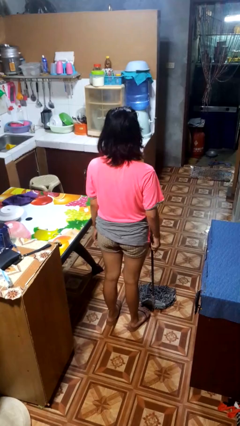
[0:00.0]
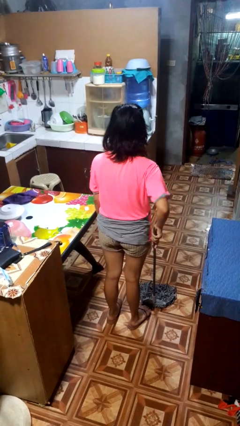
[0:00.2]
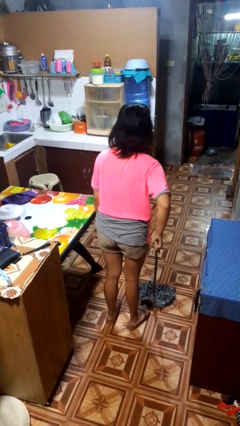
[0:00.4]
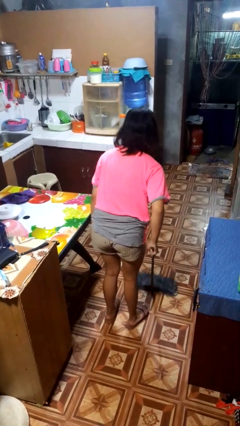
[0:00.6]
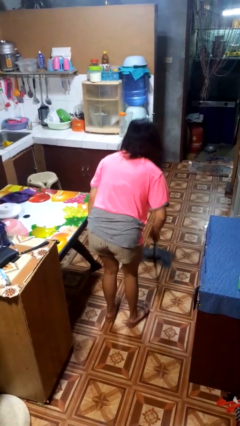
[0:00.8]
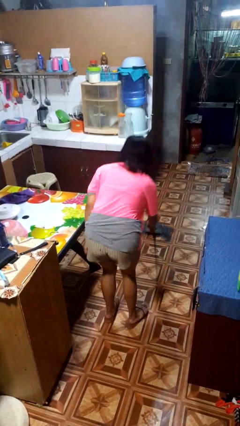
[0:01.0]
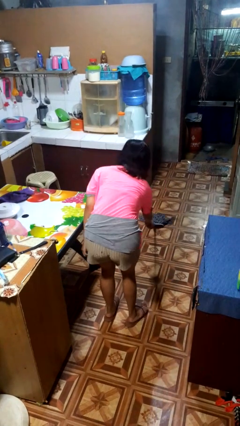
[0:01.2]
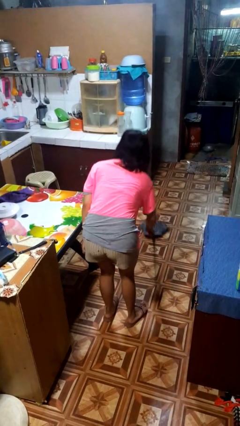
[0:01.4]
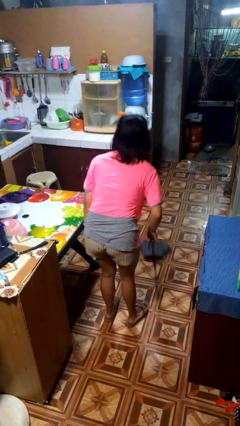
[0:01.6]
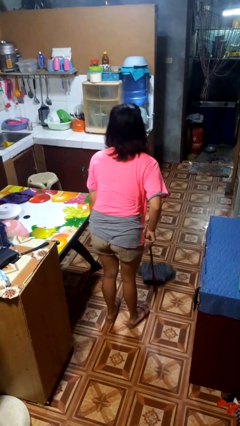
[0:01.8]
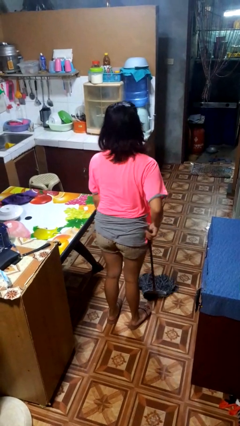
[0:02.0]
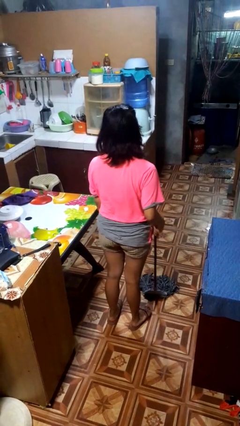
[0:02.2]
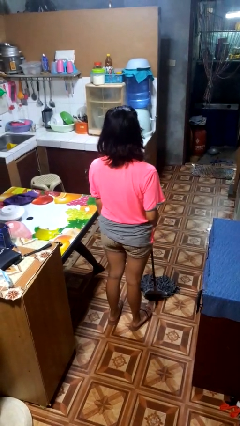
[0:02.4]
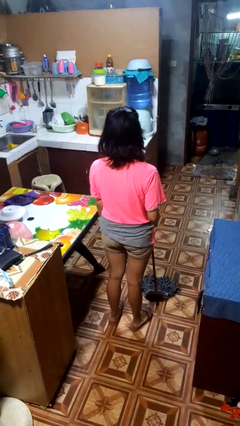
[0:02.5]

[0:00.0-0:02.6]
person mops

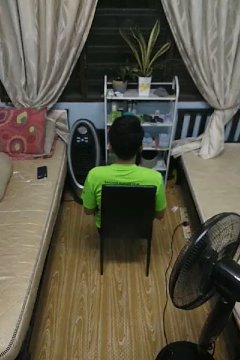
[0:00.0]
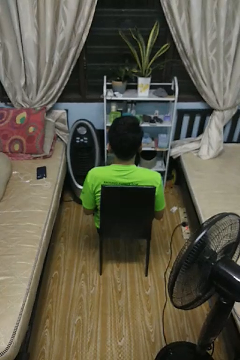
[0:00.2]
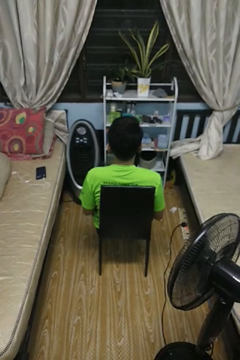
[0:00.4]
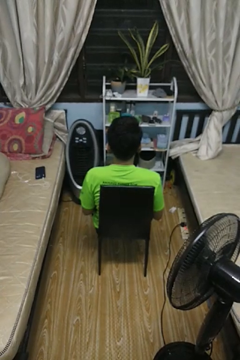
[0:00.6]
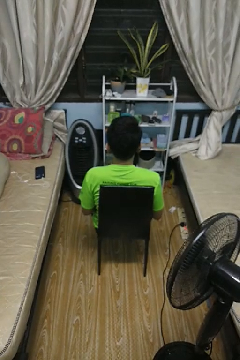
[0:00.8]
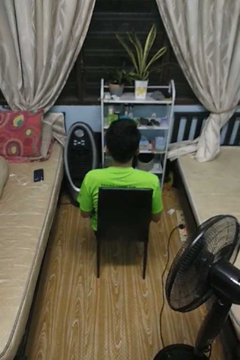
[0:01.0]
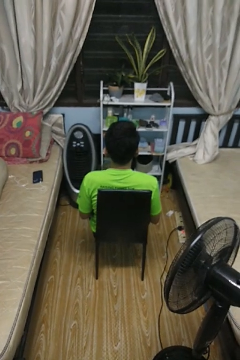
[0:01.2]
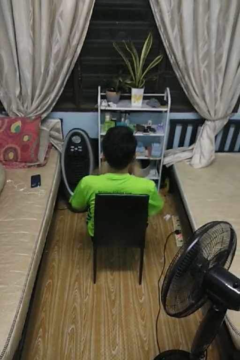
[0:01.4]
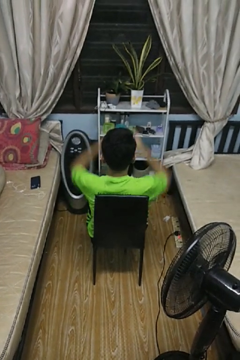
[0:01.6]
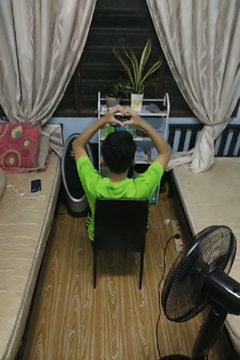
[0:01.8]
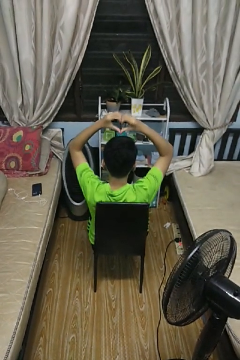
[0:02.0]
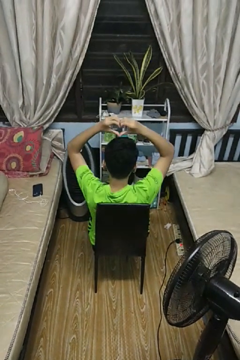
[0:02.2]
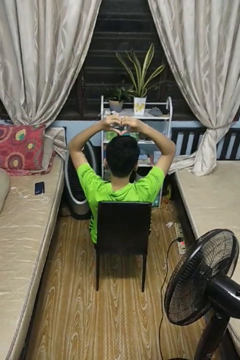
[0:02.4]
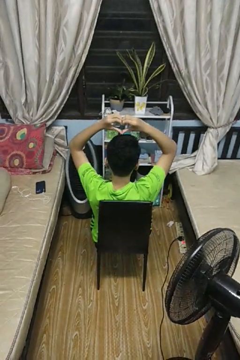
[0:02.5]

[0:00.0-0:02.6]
person gestures heart

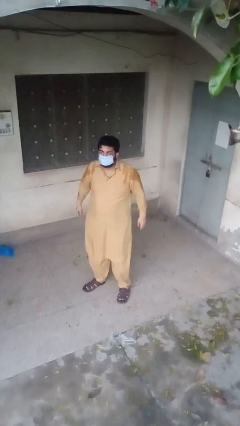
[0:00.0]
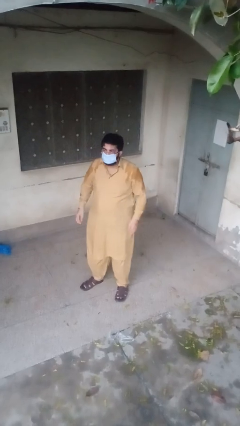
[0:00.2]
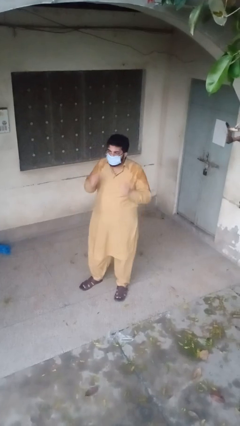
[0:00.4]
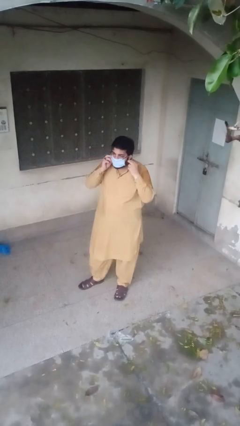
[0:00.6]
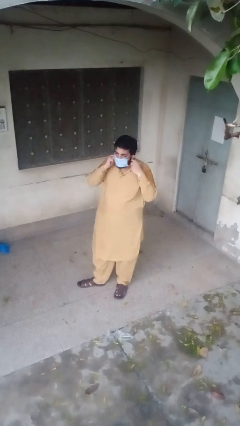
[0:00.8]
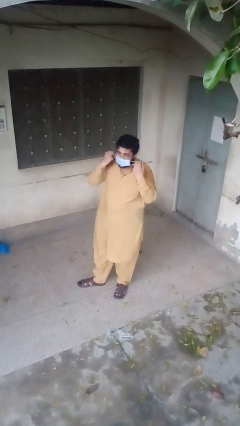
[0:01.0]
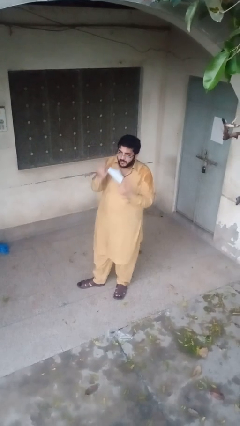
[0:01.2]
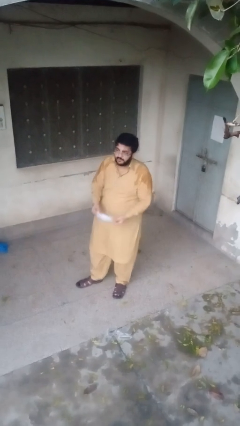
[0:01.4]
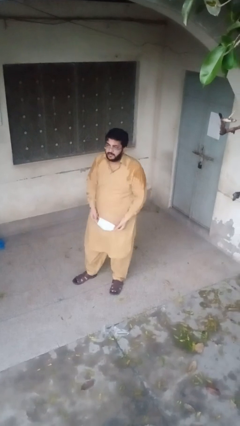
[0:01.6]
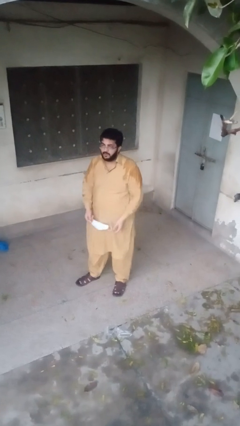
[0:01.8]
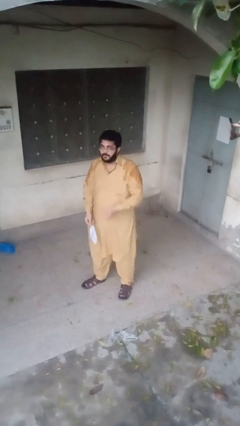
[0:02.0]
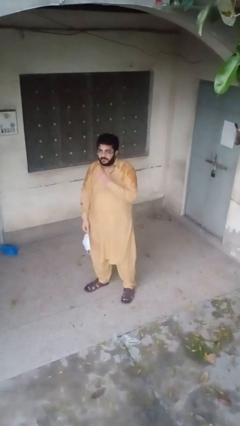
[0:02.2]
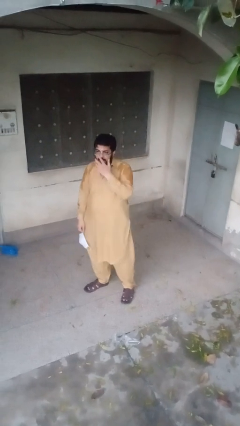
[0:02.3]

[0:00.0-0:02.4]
person takes off facemask

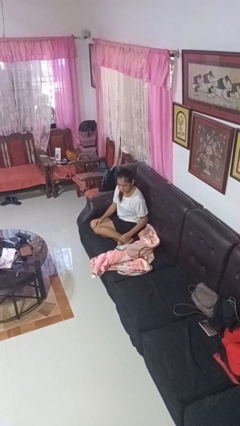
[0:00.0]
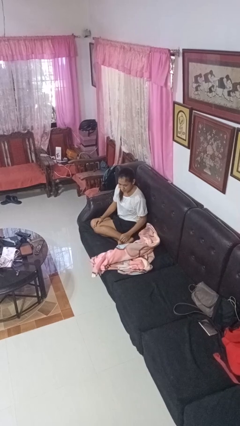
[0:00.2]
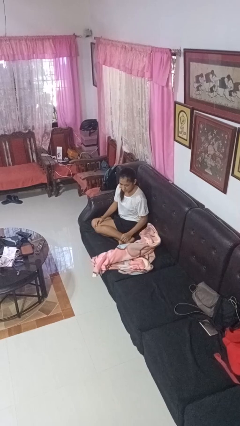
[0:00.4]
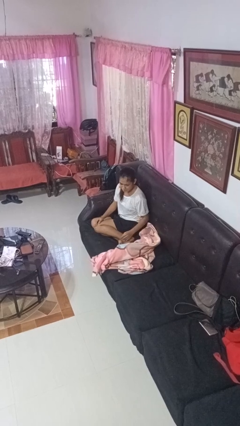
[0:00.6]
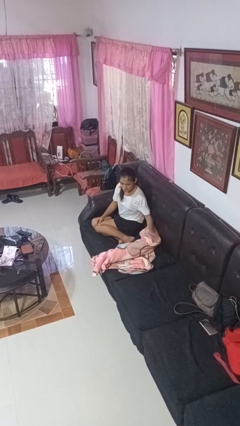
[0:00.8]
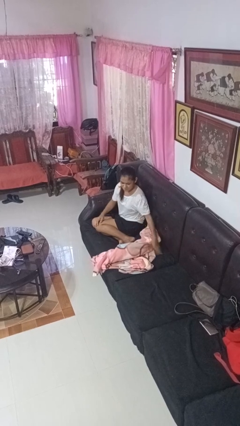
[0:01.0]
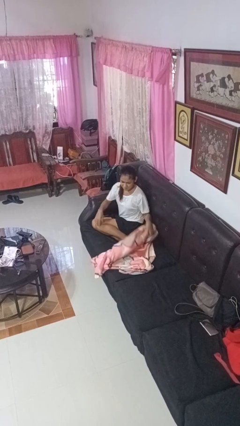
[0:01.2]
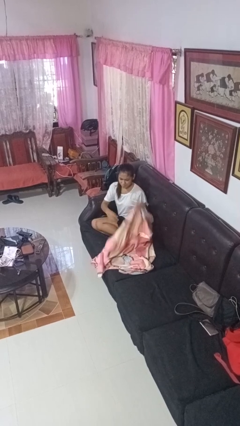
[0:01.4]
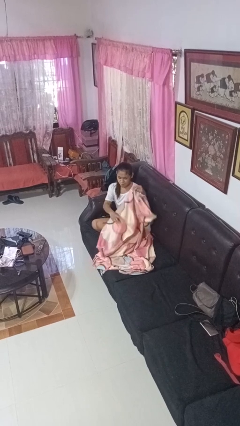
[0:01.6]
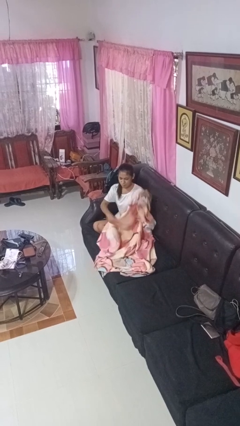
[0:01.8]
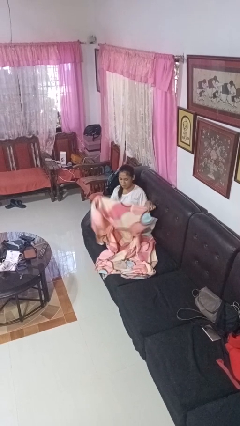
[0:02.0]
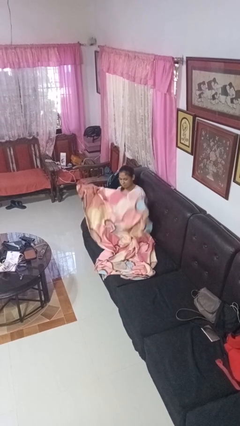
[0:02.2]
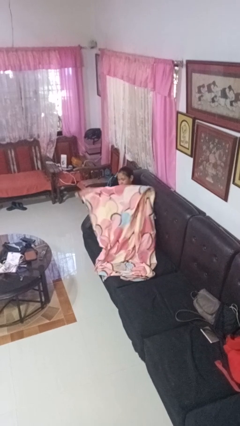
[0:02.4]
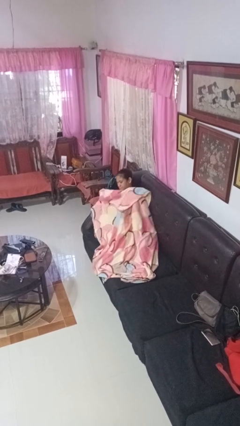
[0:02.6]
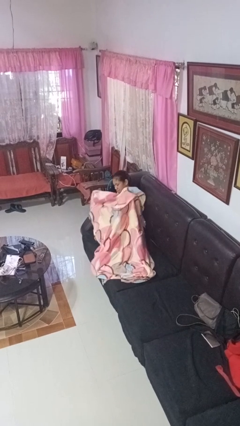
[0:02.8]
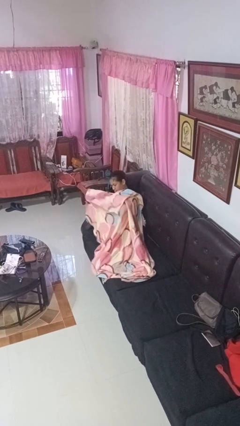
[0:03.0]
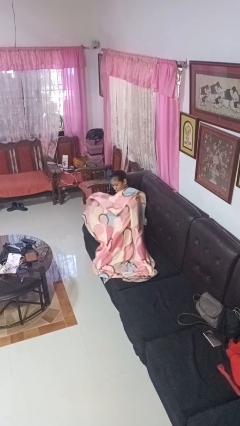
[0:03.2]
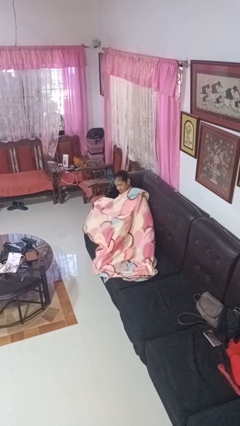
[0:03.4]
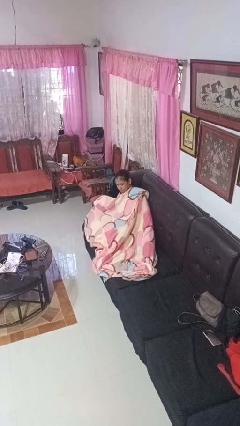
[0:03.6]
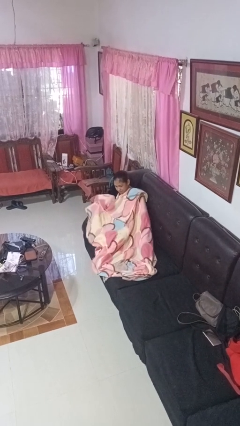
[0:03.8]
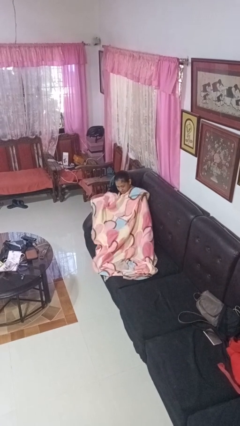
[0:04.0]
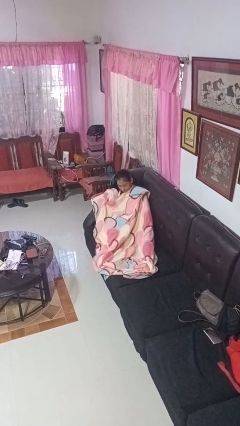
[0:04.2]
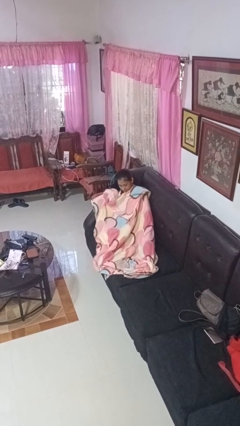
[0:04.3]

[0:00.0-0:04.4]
person covers with blanket

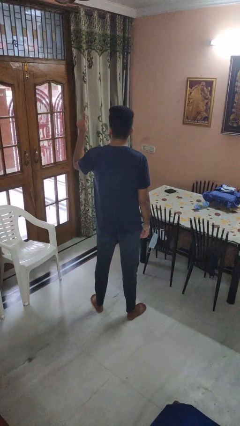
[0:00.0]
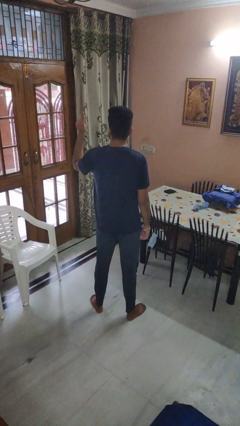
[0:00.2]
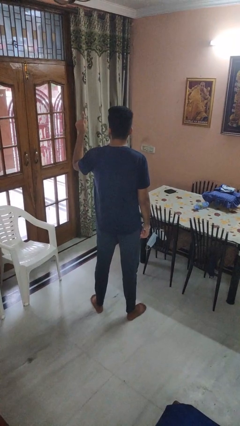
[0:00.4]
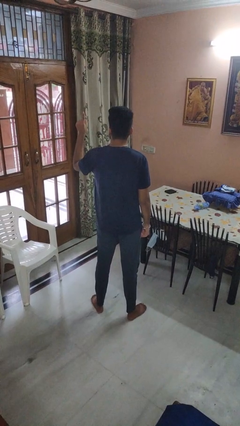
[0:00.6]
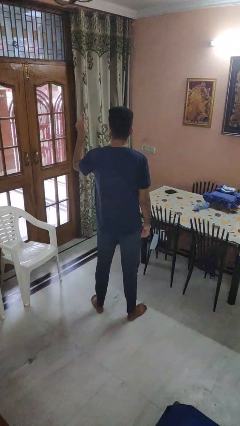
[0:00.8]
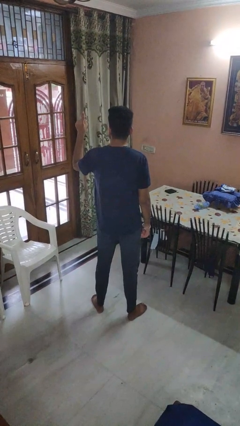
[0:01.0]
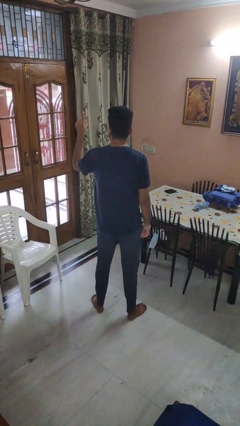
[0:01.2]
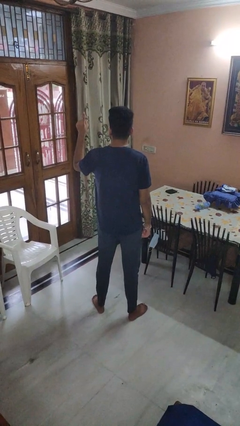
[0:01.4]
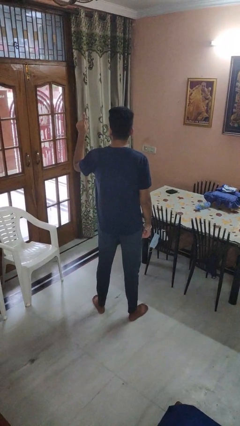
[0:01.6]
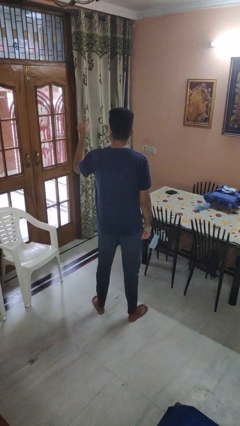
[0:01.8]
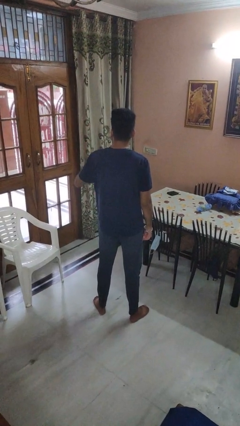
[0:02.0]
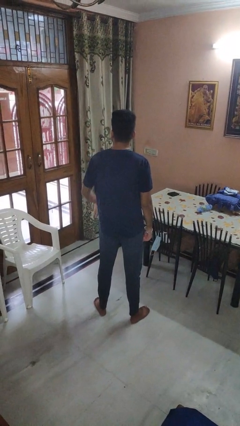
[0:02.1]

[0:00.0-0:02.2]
person gestures number one

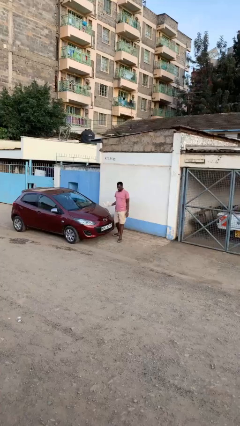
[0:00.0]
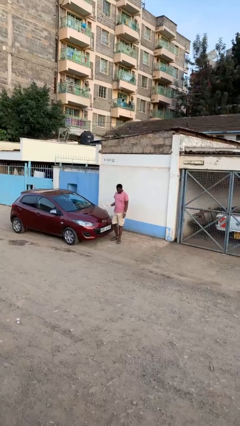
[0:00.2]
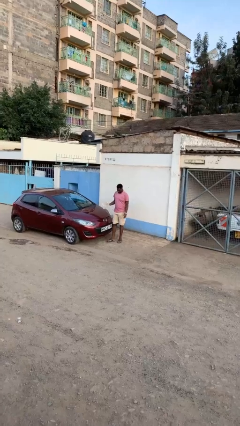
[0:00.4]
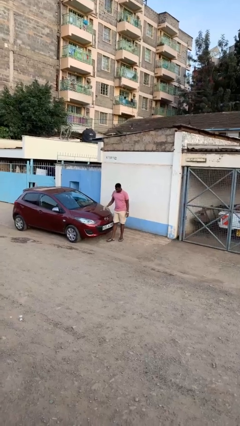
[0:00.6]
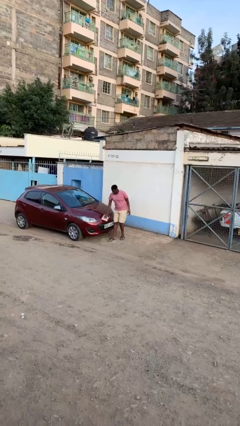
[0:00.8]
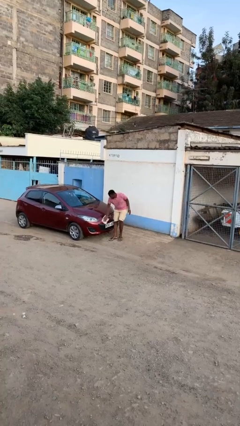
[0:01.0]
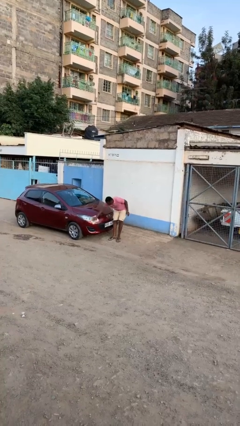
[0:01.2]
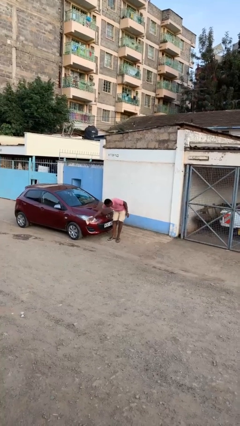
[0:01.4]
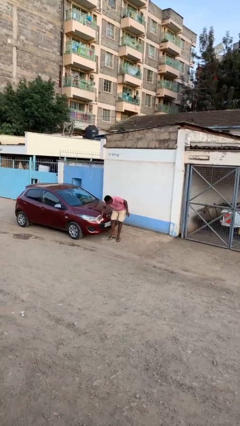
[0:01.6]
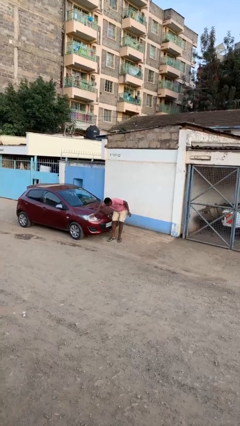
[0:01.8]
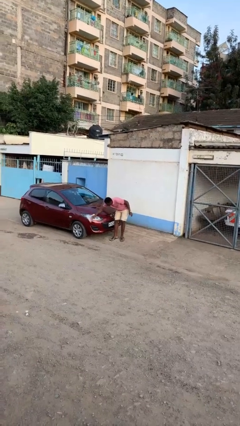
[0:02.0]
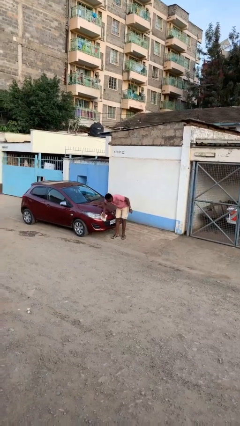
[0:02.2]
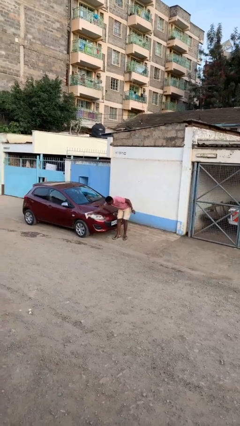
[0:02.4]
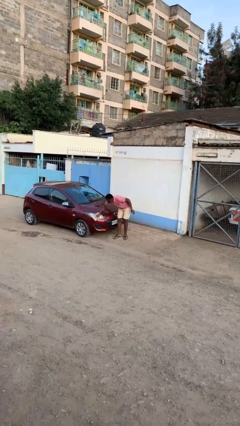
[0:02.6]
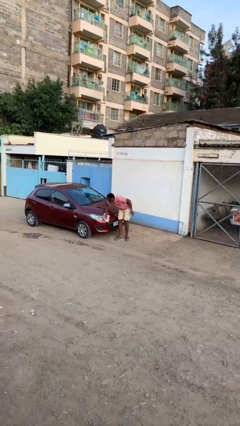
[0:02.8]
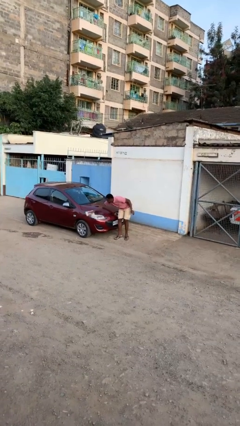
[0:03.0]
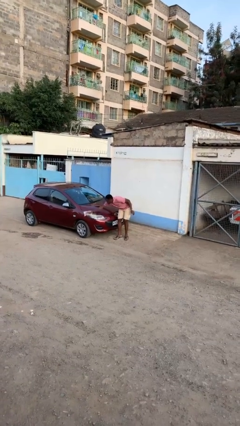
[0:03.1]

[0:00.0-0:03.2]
person polishes car with rag

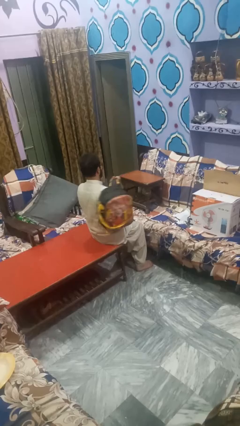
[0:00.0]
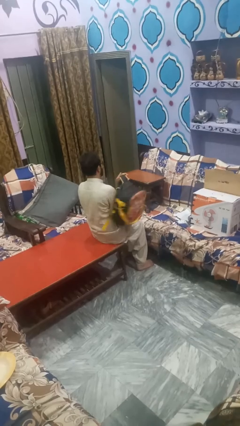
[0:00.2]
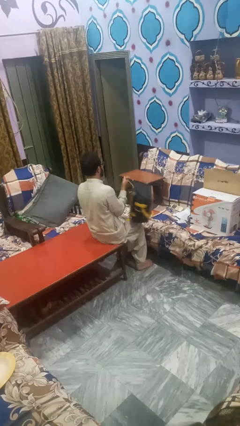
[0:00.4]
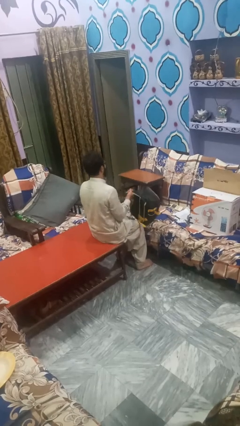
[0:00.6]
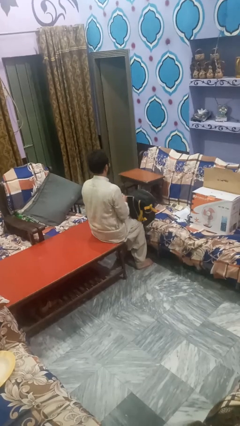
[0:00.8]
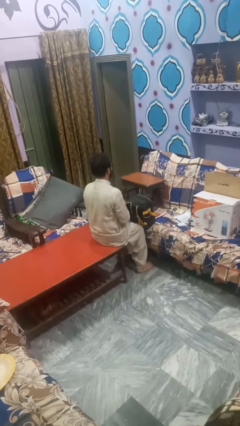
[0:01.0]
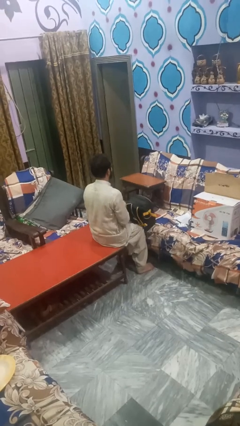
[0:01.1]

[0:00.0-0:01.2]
person takes off backpack
